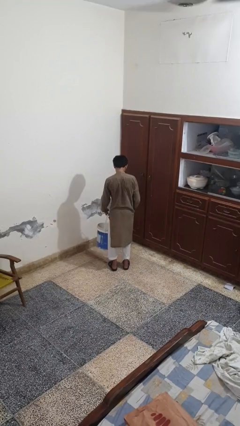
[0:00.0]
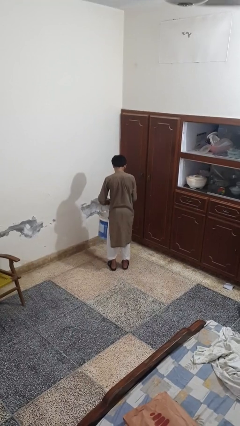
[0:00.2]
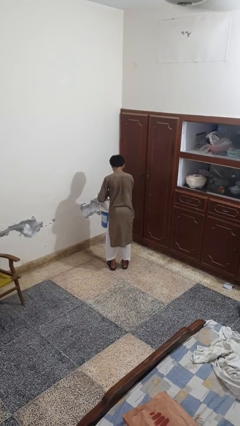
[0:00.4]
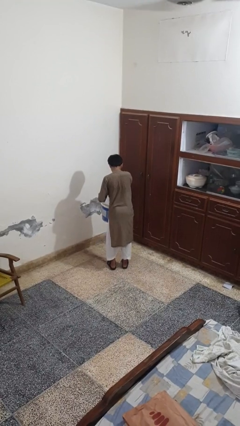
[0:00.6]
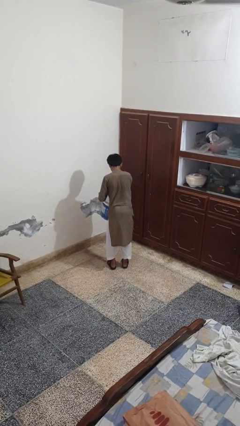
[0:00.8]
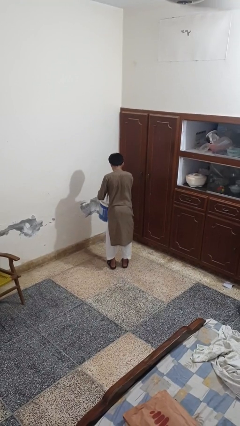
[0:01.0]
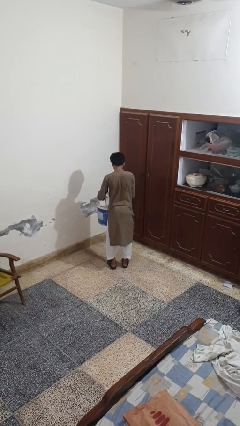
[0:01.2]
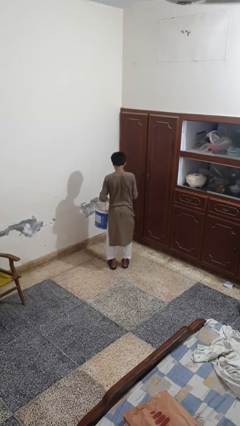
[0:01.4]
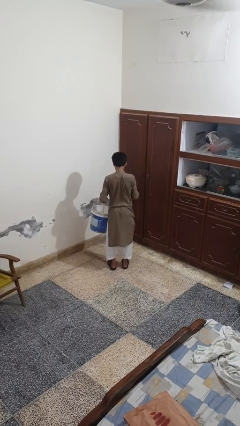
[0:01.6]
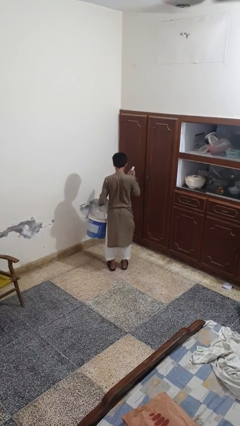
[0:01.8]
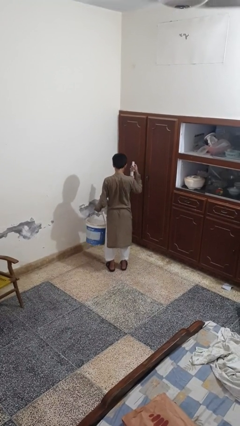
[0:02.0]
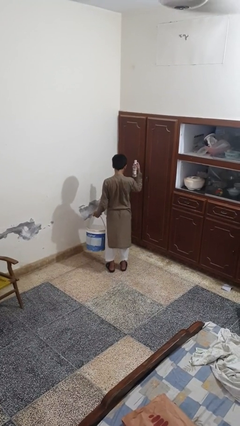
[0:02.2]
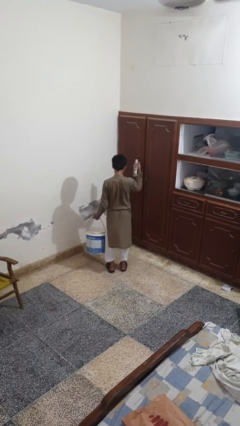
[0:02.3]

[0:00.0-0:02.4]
person takes object from basket

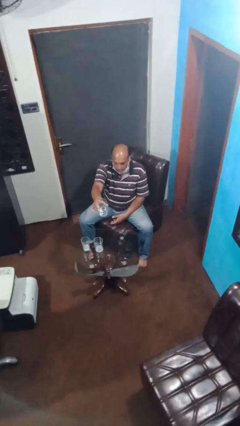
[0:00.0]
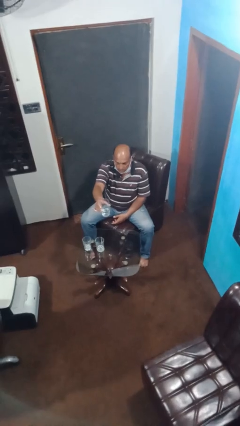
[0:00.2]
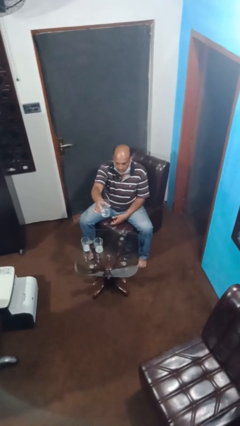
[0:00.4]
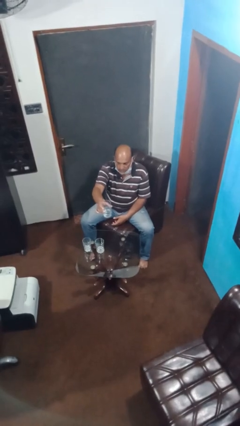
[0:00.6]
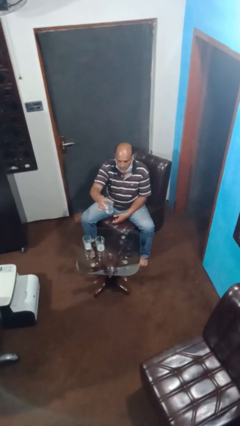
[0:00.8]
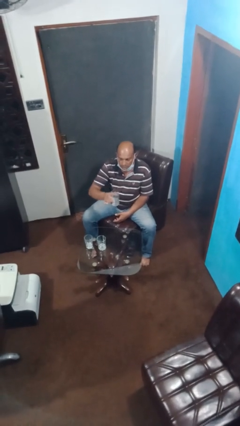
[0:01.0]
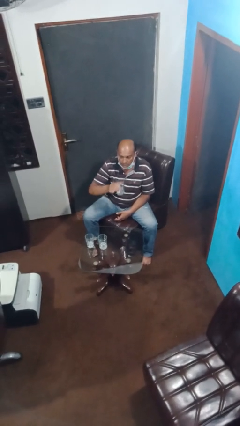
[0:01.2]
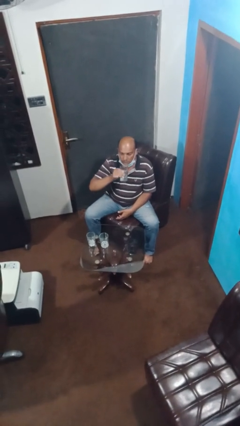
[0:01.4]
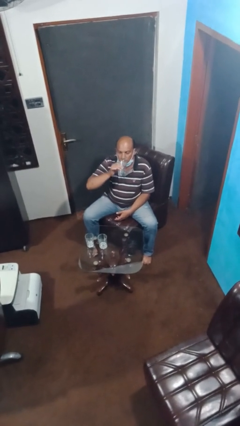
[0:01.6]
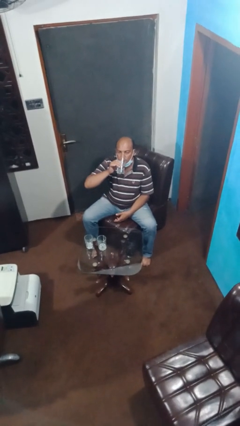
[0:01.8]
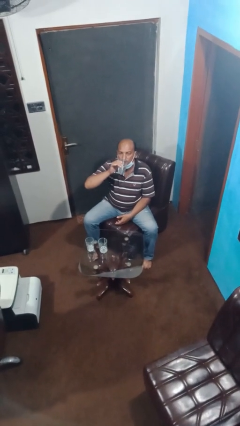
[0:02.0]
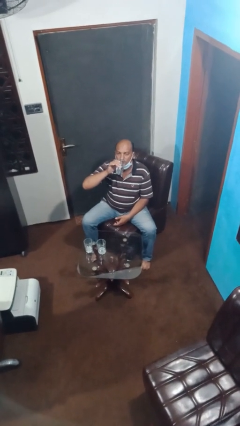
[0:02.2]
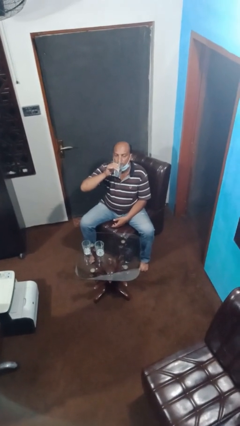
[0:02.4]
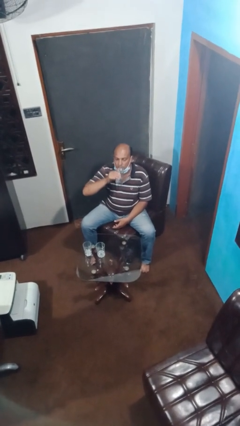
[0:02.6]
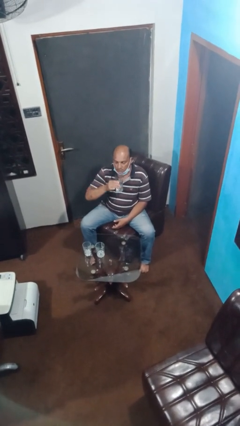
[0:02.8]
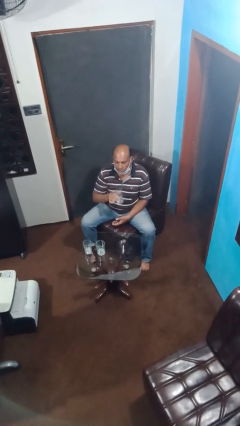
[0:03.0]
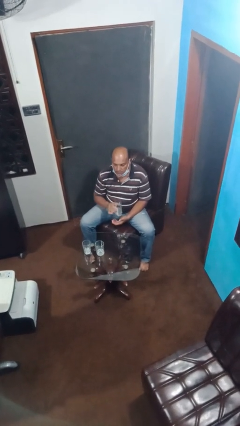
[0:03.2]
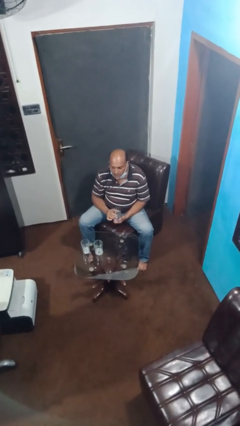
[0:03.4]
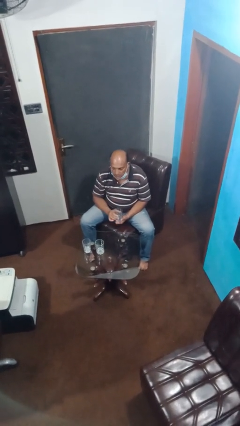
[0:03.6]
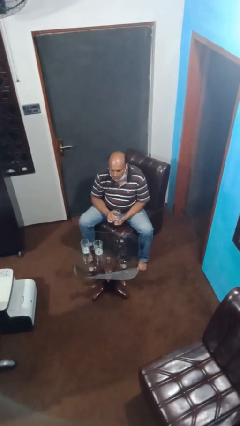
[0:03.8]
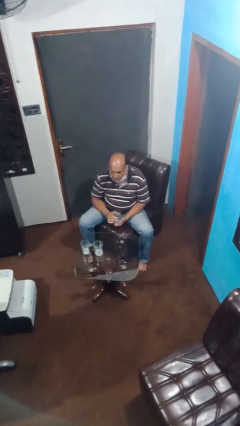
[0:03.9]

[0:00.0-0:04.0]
person drinks from shotglass

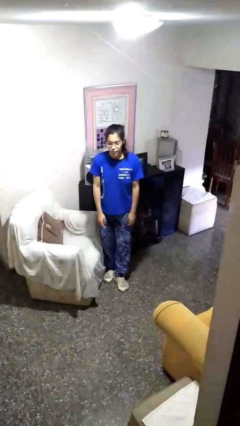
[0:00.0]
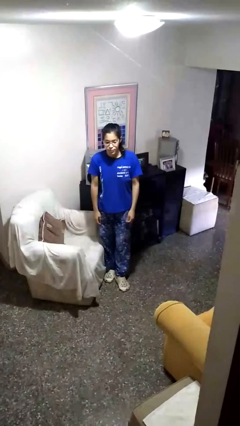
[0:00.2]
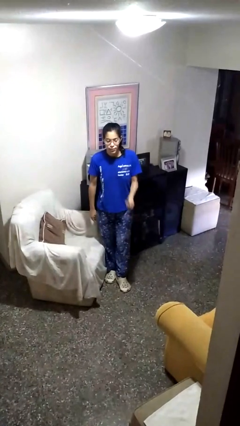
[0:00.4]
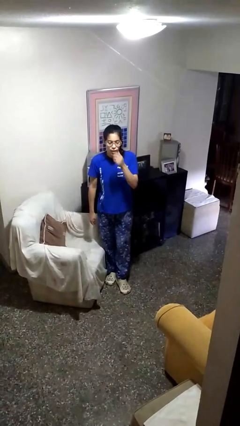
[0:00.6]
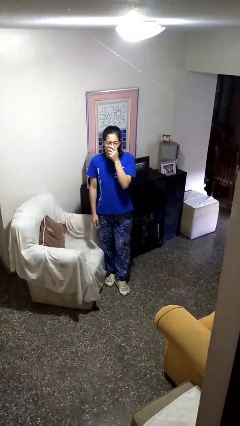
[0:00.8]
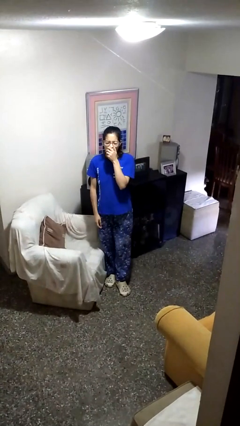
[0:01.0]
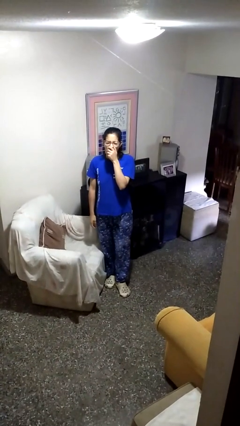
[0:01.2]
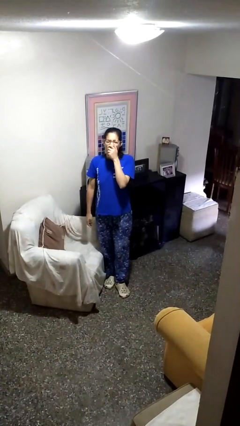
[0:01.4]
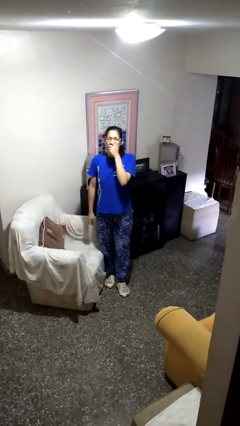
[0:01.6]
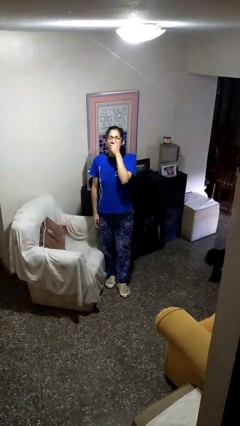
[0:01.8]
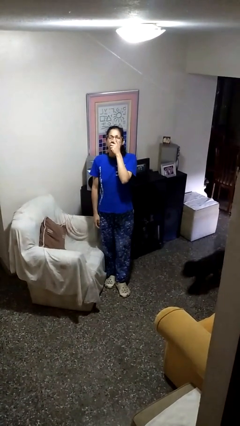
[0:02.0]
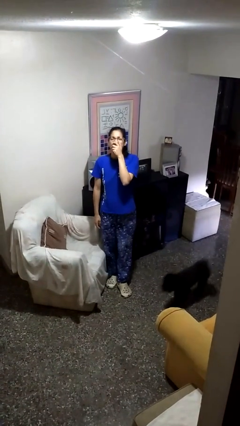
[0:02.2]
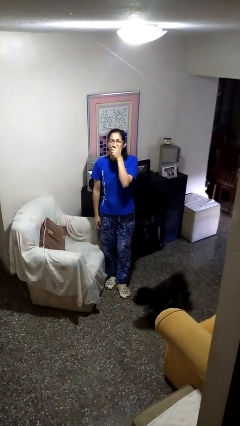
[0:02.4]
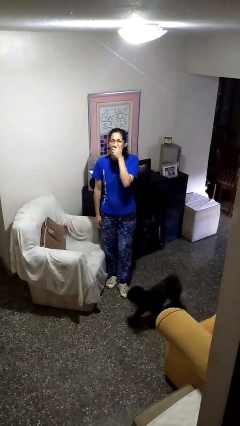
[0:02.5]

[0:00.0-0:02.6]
person yawns

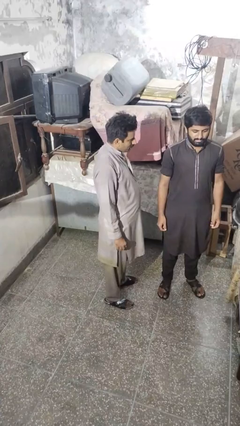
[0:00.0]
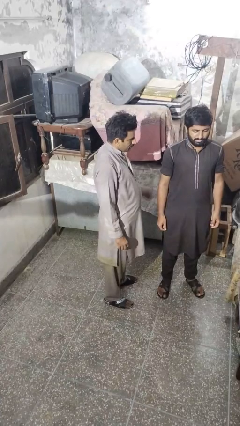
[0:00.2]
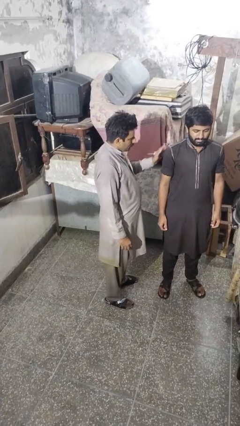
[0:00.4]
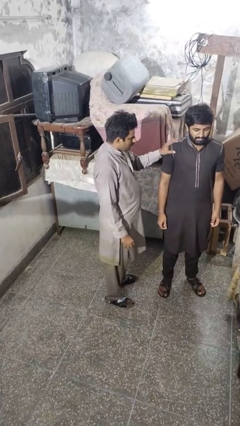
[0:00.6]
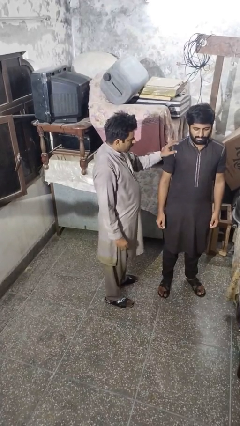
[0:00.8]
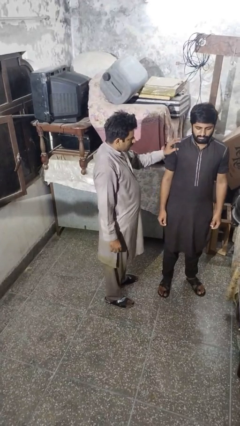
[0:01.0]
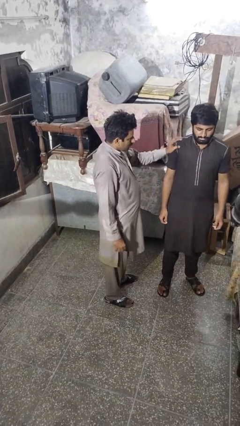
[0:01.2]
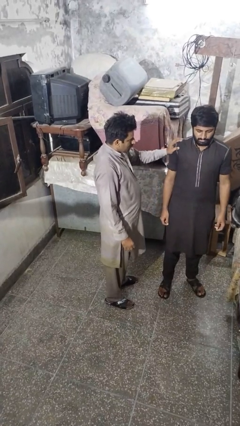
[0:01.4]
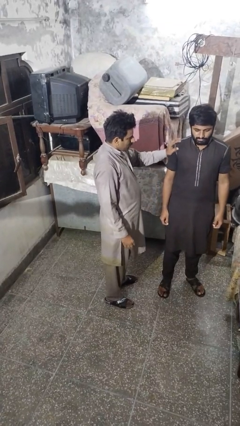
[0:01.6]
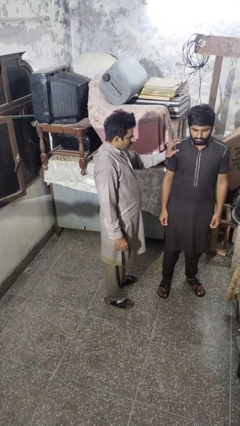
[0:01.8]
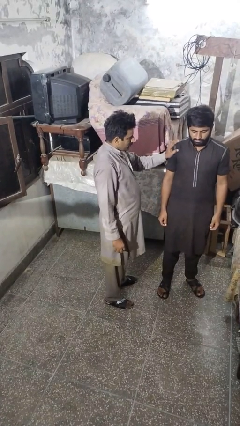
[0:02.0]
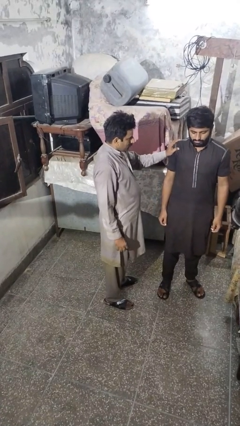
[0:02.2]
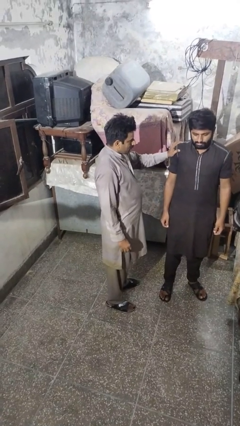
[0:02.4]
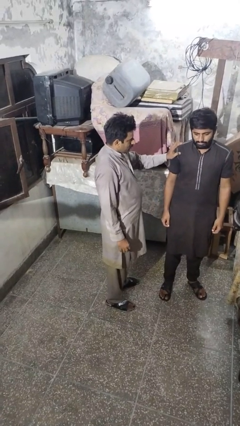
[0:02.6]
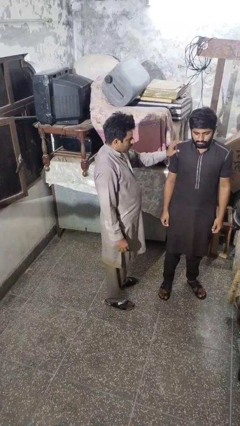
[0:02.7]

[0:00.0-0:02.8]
person grabs person by shoulder

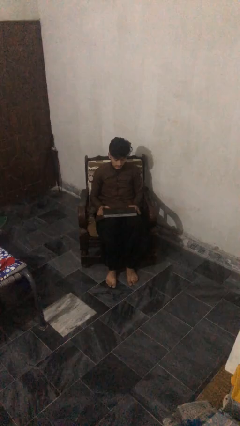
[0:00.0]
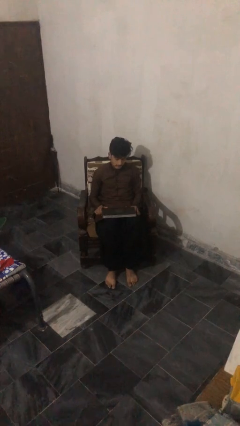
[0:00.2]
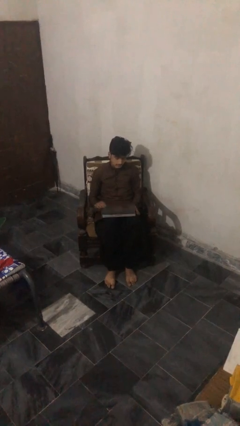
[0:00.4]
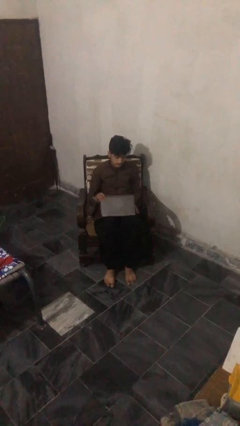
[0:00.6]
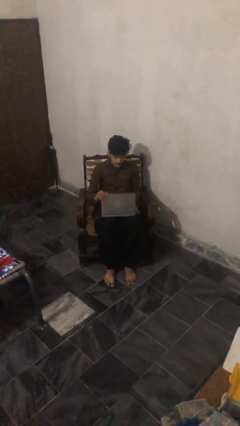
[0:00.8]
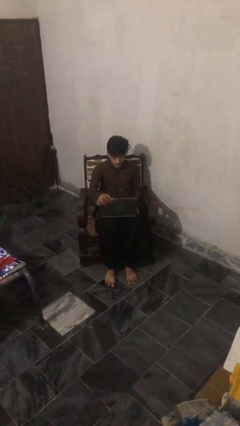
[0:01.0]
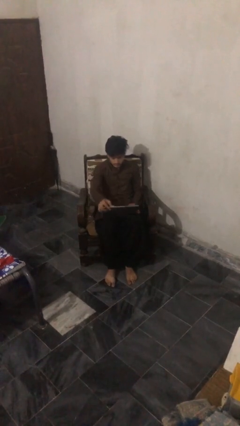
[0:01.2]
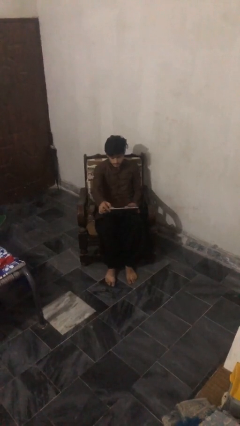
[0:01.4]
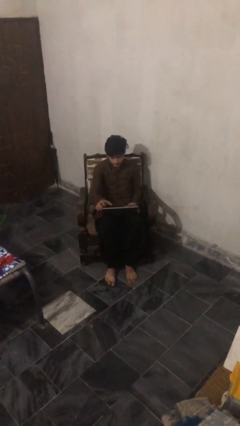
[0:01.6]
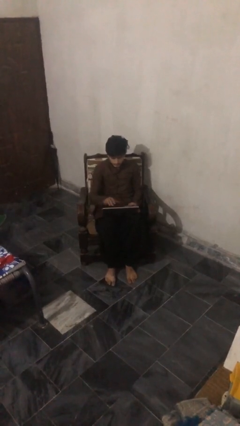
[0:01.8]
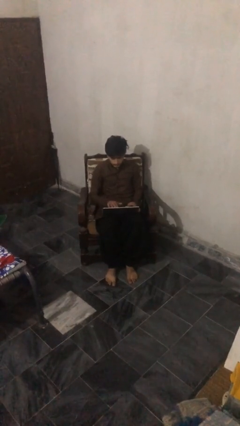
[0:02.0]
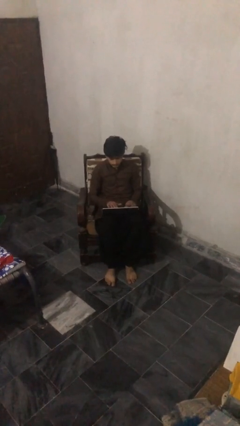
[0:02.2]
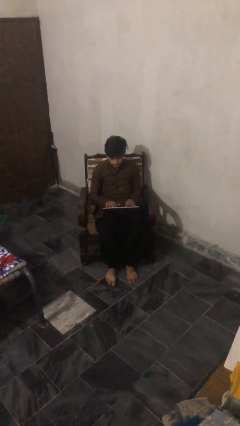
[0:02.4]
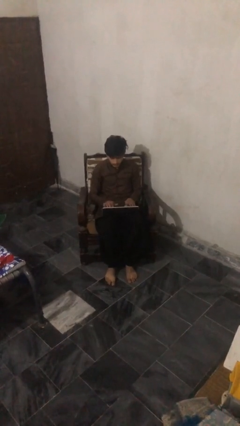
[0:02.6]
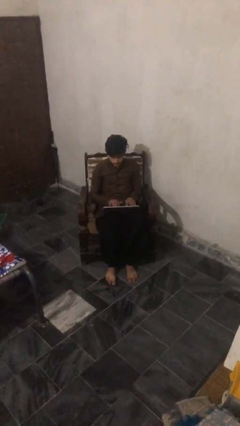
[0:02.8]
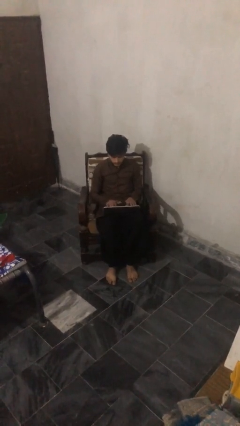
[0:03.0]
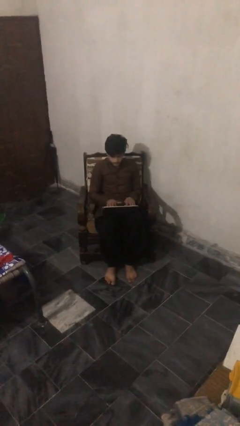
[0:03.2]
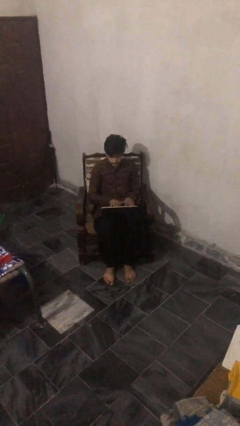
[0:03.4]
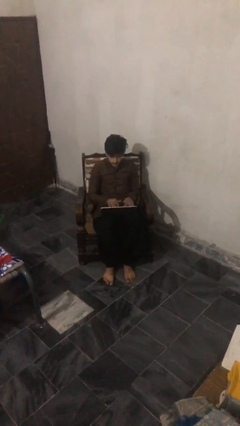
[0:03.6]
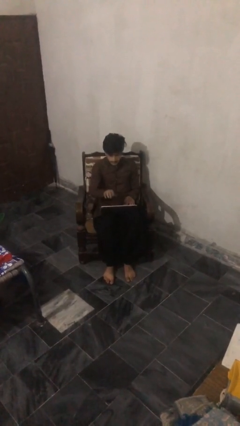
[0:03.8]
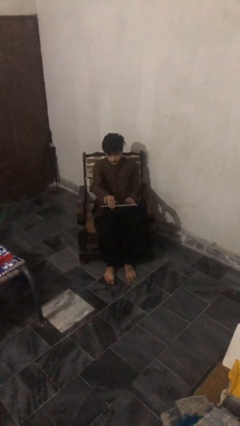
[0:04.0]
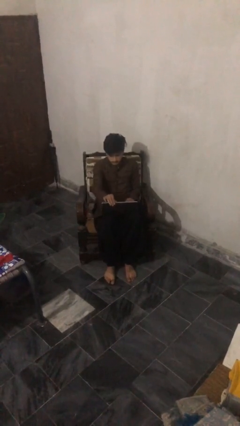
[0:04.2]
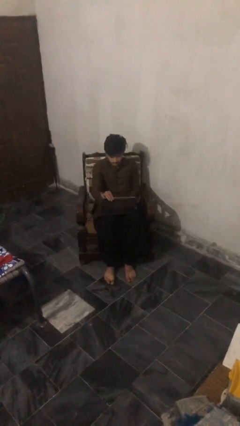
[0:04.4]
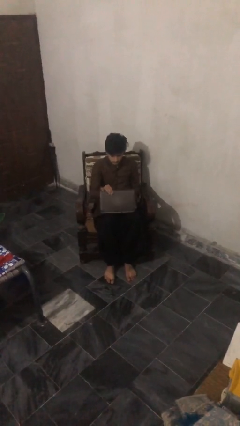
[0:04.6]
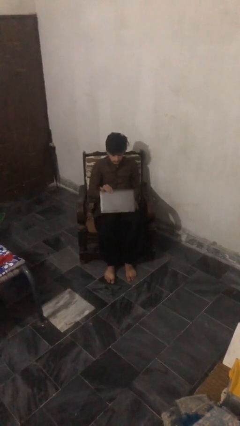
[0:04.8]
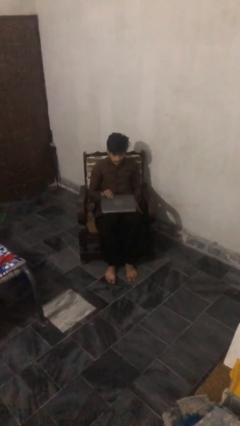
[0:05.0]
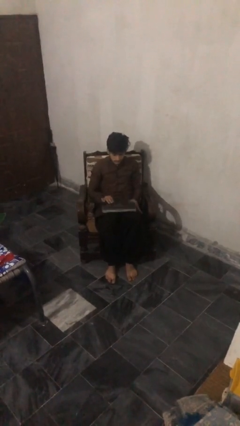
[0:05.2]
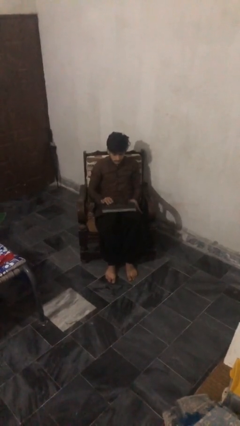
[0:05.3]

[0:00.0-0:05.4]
person interacts with laptop
